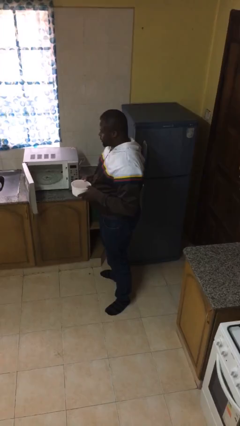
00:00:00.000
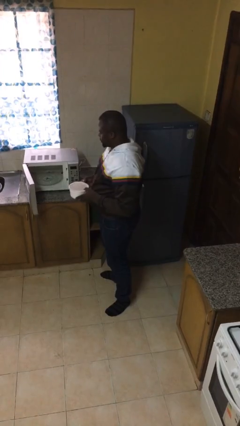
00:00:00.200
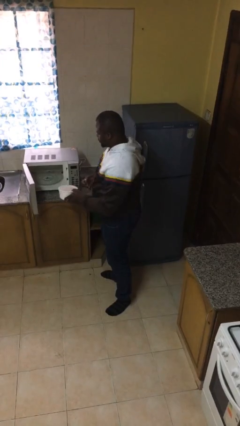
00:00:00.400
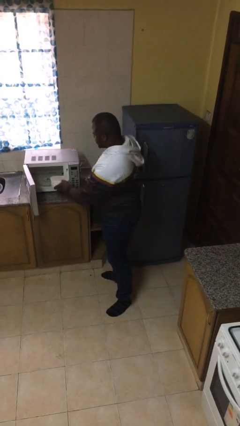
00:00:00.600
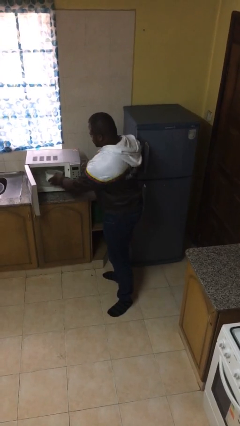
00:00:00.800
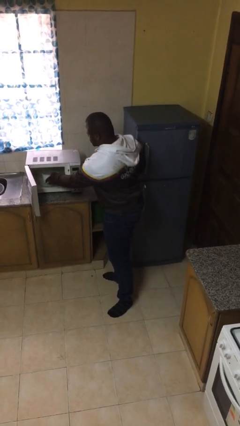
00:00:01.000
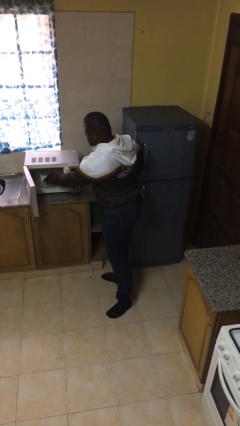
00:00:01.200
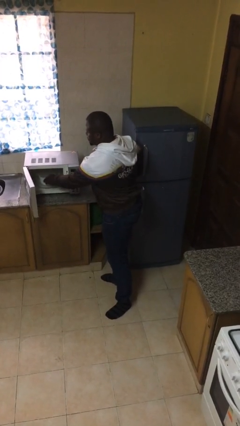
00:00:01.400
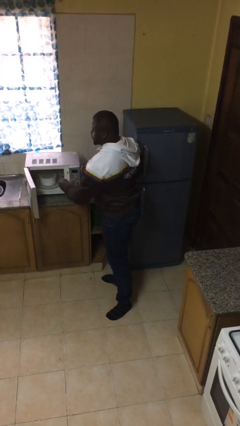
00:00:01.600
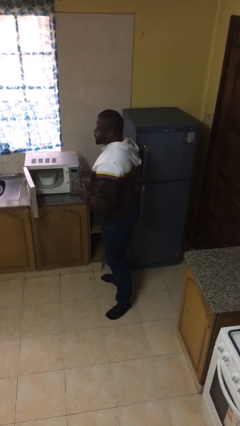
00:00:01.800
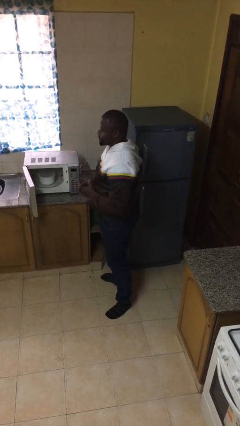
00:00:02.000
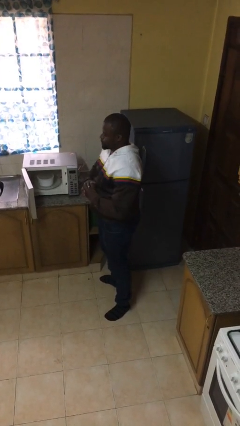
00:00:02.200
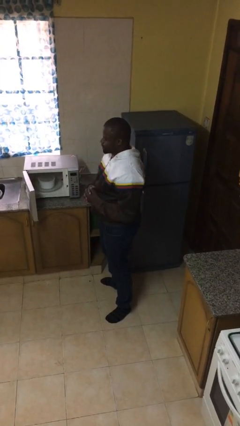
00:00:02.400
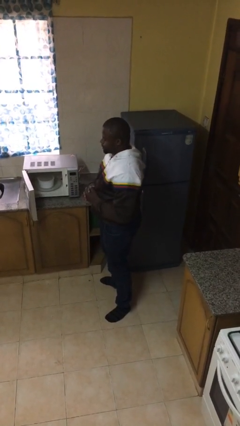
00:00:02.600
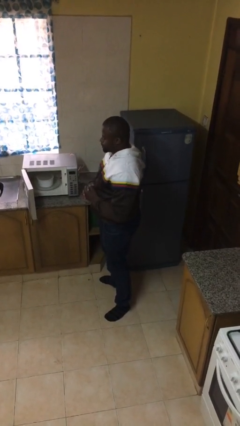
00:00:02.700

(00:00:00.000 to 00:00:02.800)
person puts object into microwave

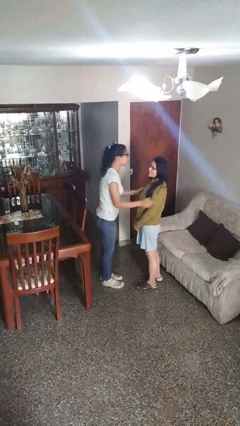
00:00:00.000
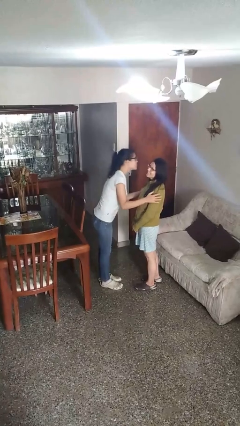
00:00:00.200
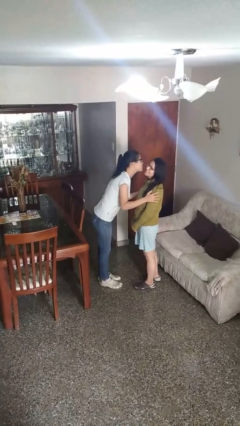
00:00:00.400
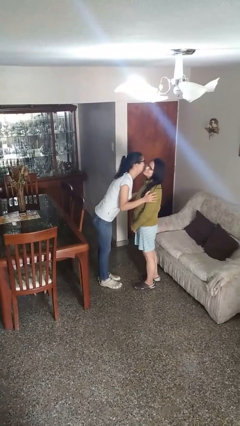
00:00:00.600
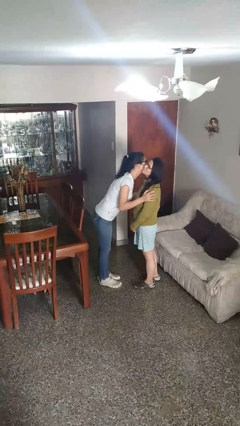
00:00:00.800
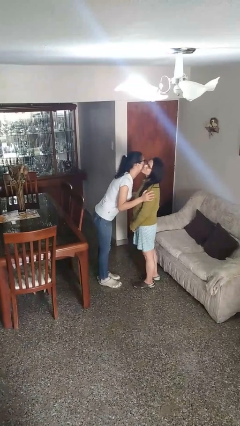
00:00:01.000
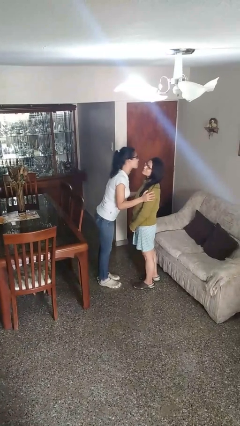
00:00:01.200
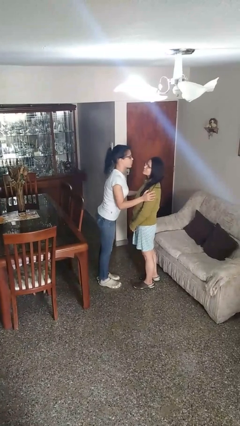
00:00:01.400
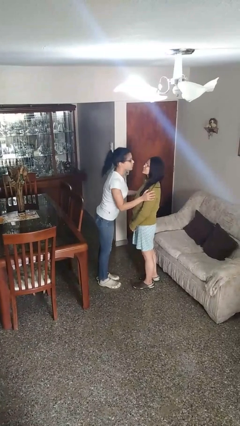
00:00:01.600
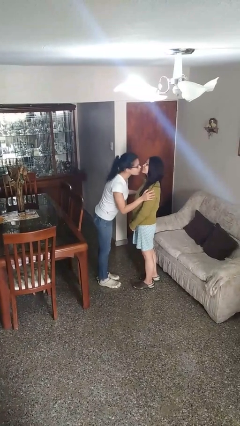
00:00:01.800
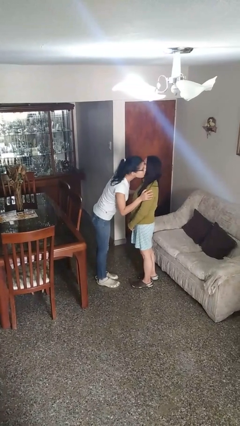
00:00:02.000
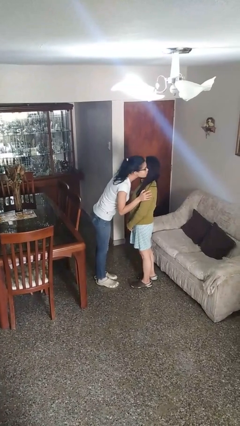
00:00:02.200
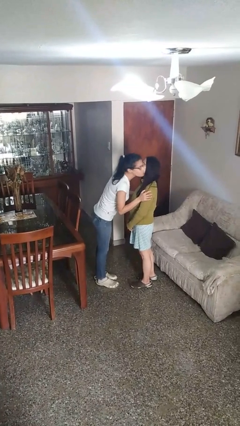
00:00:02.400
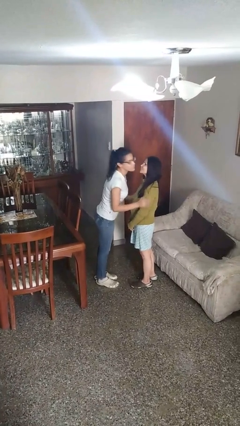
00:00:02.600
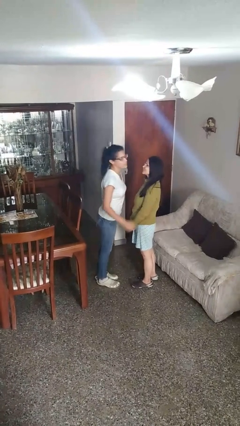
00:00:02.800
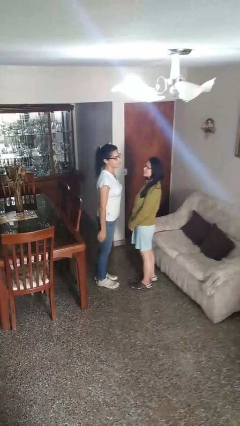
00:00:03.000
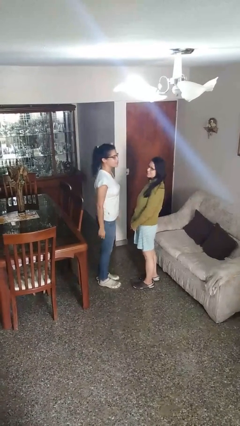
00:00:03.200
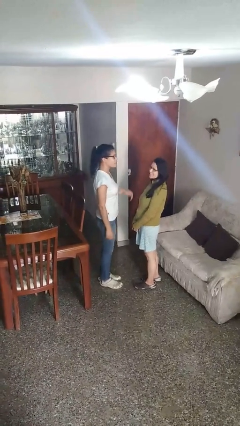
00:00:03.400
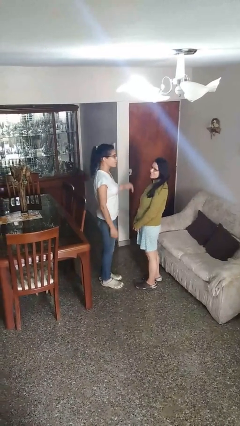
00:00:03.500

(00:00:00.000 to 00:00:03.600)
person kisses cheek of person

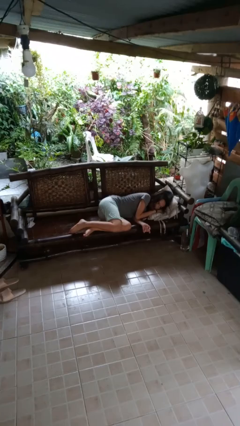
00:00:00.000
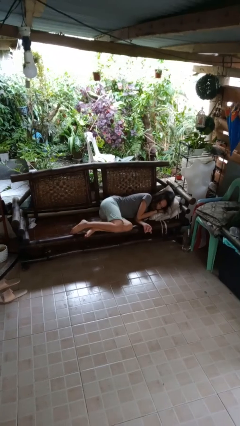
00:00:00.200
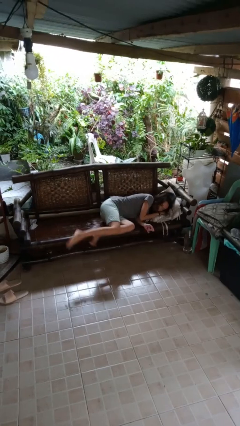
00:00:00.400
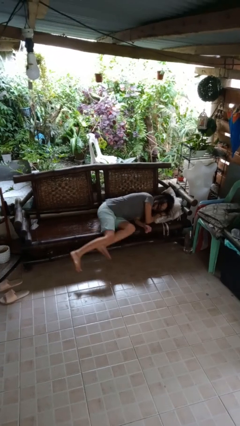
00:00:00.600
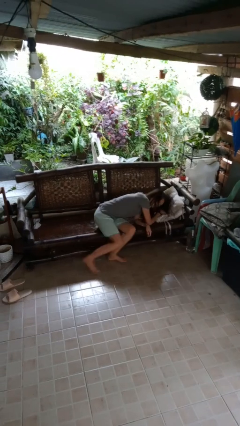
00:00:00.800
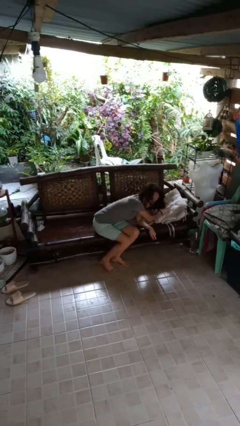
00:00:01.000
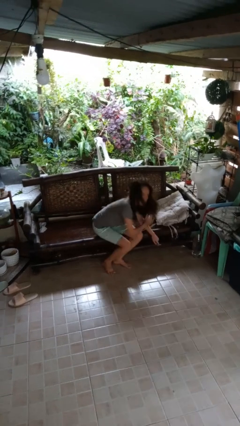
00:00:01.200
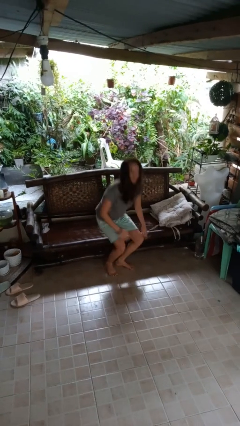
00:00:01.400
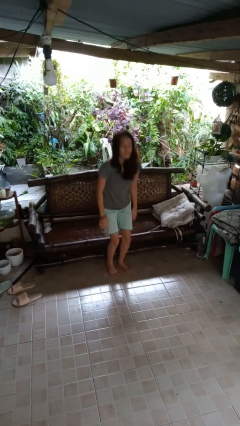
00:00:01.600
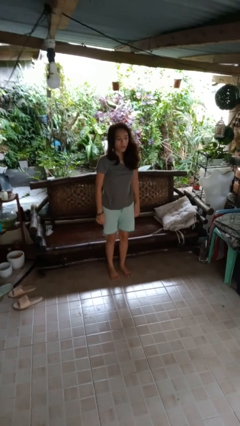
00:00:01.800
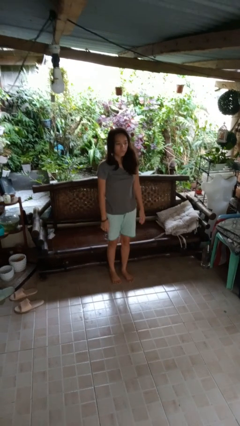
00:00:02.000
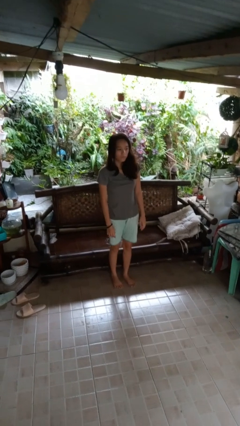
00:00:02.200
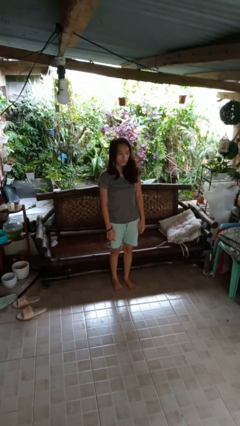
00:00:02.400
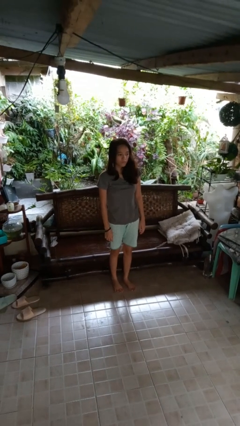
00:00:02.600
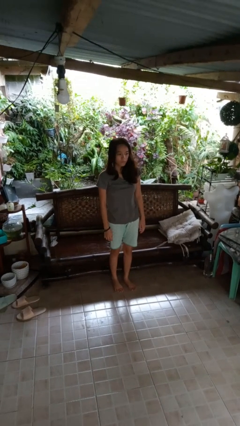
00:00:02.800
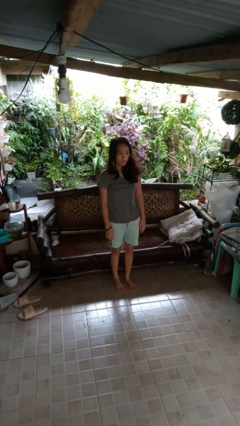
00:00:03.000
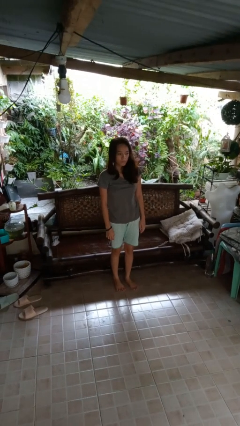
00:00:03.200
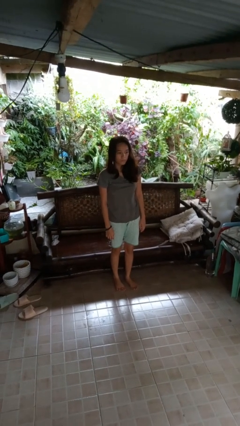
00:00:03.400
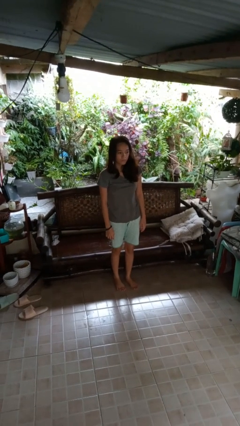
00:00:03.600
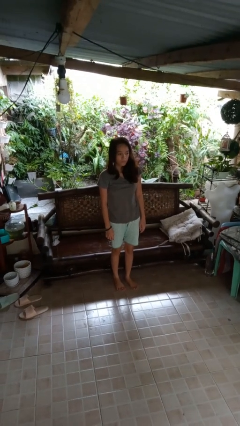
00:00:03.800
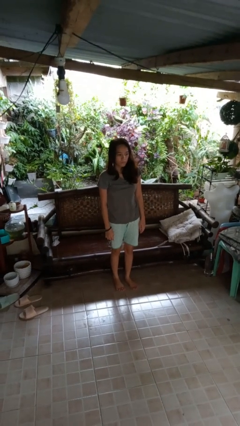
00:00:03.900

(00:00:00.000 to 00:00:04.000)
person stands up

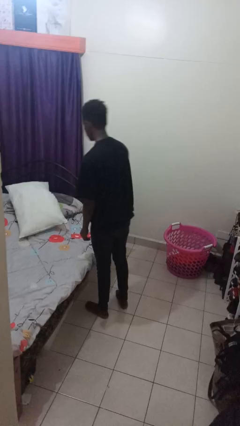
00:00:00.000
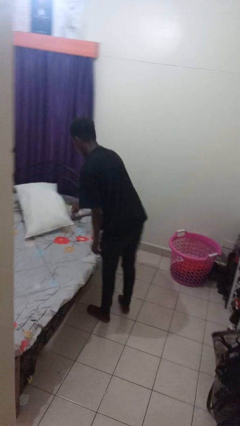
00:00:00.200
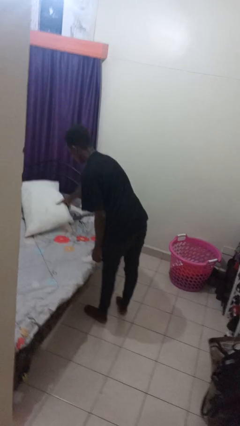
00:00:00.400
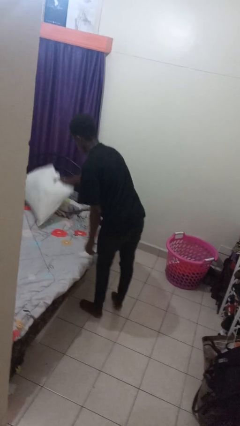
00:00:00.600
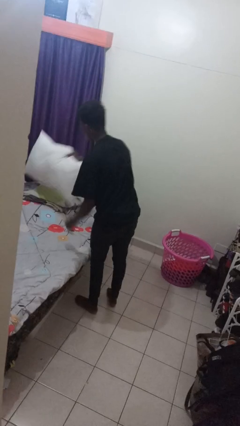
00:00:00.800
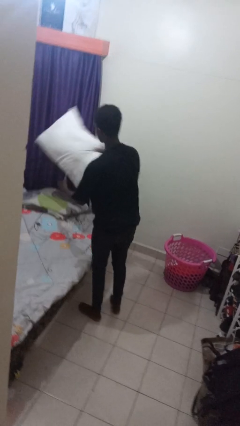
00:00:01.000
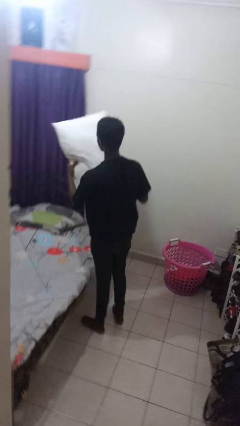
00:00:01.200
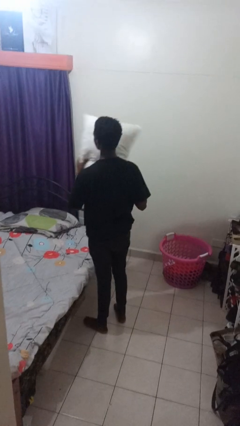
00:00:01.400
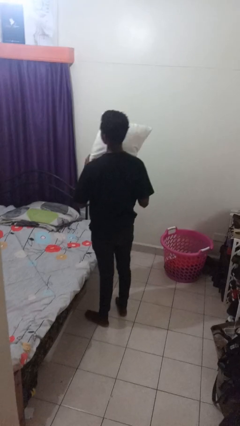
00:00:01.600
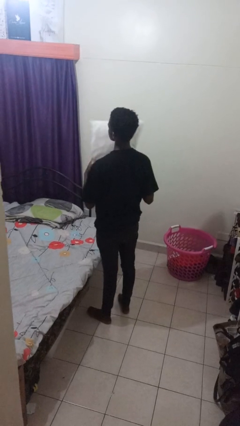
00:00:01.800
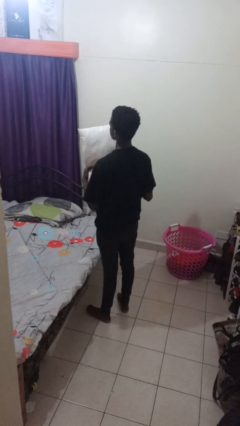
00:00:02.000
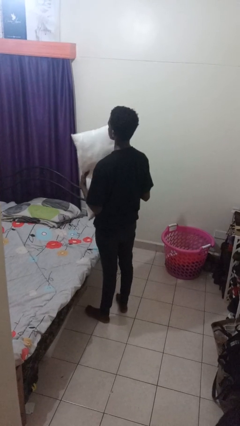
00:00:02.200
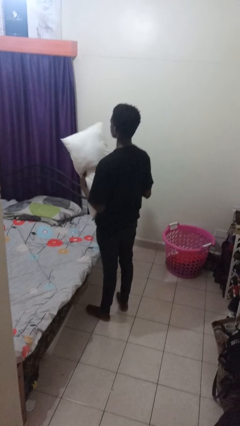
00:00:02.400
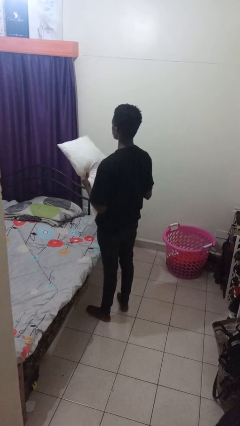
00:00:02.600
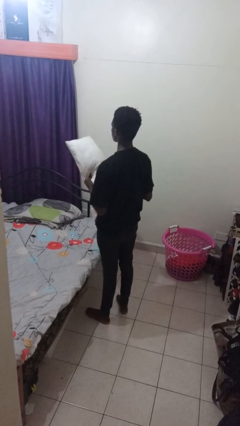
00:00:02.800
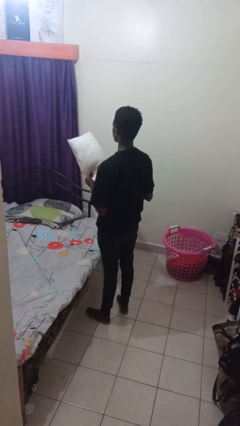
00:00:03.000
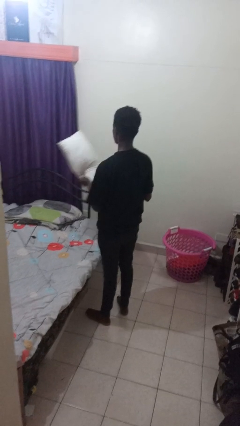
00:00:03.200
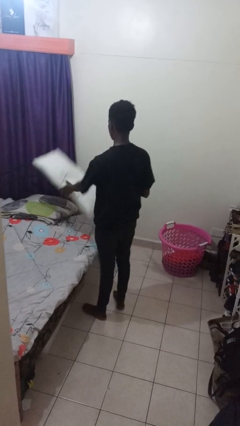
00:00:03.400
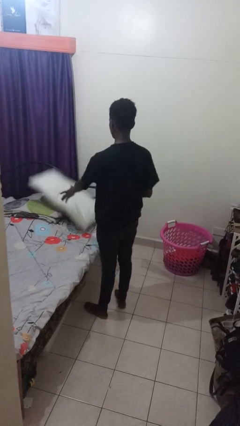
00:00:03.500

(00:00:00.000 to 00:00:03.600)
person picks up object from bed

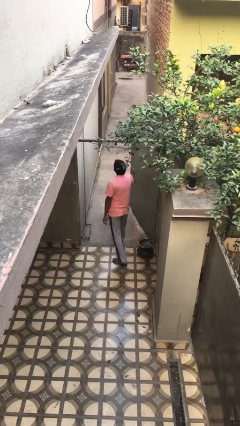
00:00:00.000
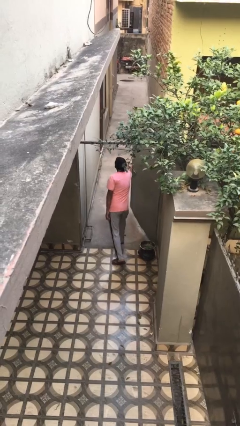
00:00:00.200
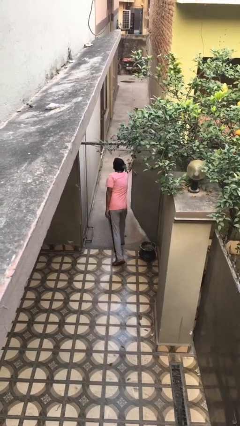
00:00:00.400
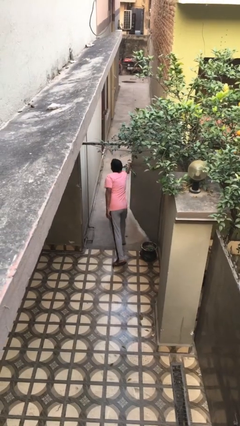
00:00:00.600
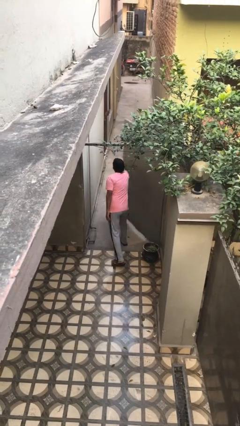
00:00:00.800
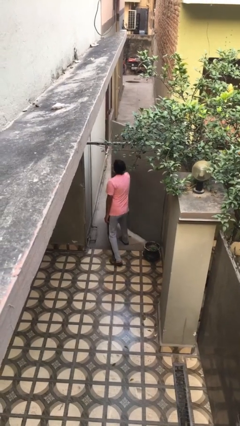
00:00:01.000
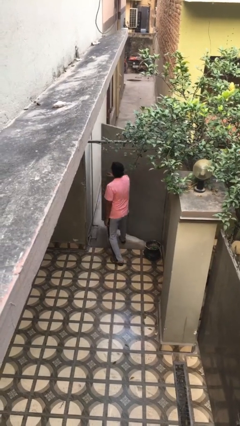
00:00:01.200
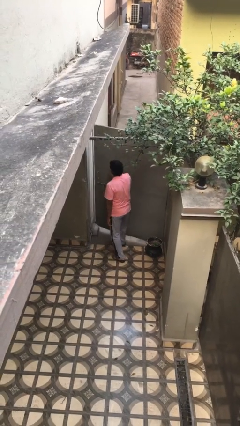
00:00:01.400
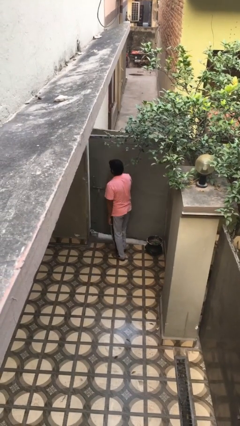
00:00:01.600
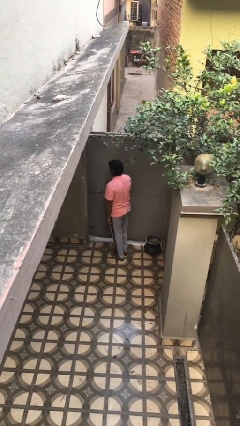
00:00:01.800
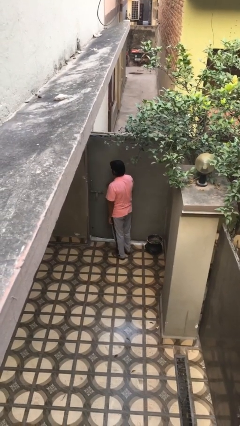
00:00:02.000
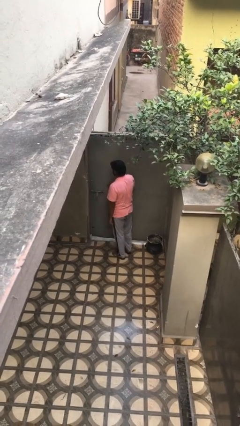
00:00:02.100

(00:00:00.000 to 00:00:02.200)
person closes facility door

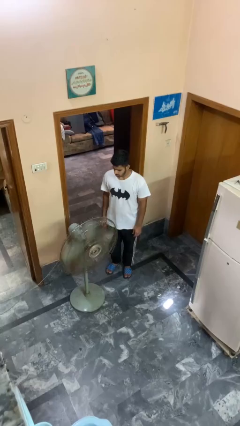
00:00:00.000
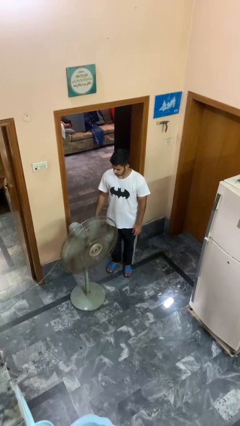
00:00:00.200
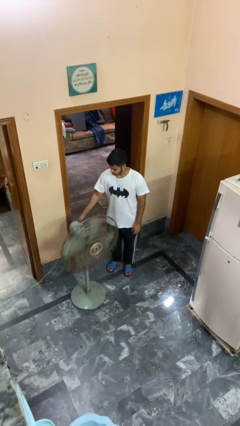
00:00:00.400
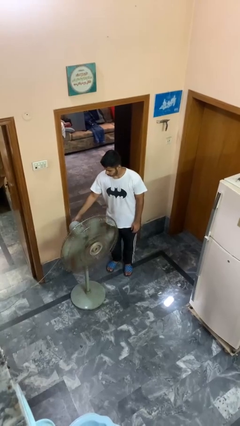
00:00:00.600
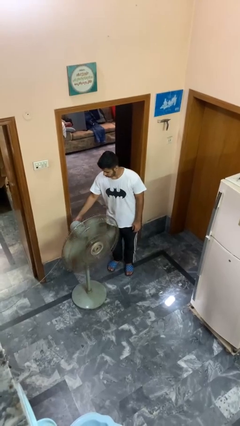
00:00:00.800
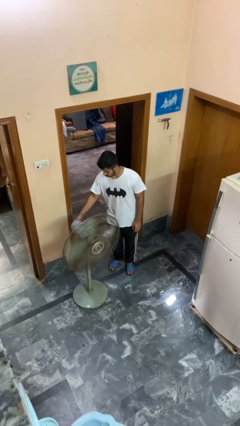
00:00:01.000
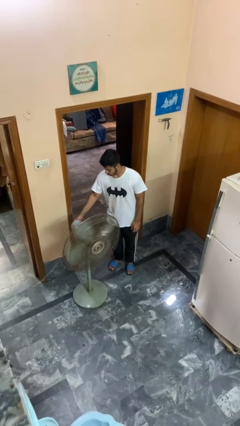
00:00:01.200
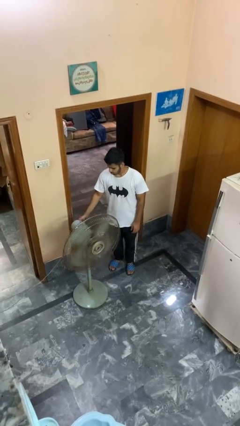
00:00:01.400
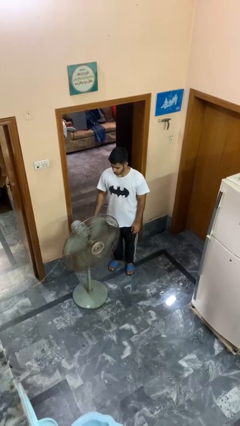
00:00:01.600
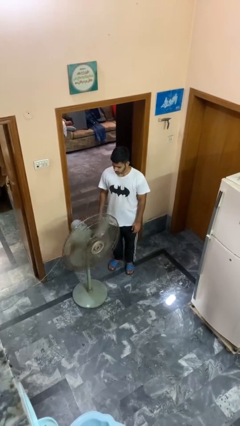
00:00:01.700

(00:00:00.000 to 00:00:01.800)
person turns off fan
